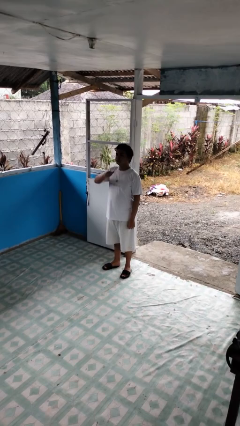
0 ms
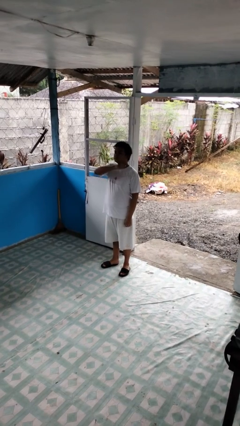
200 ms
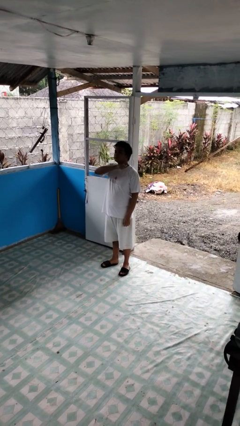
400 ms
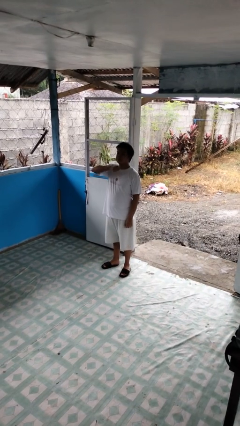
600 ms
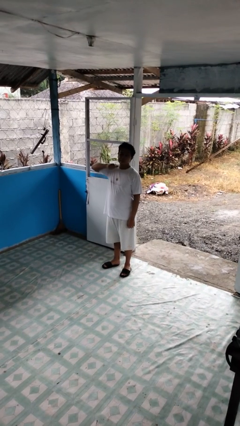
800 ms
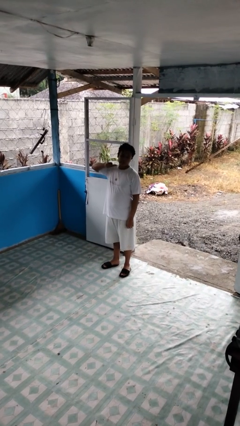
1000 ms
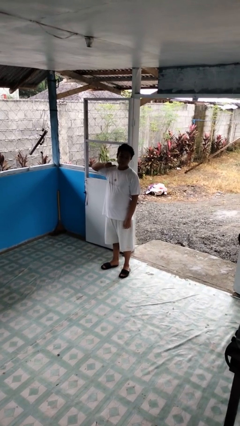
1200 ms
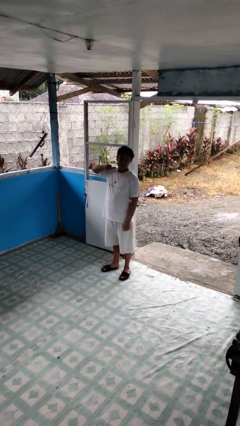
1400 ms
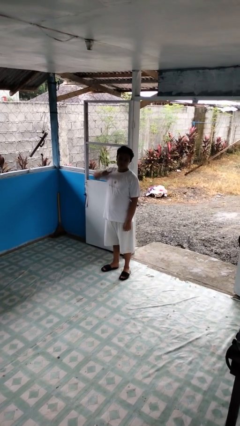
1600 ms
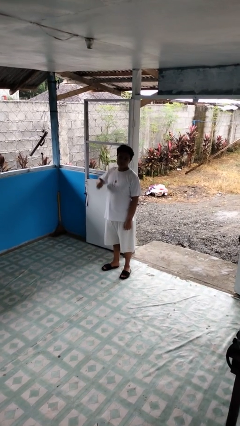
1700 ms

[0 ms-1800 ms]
person gestures cut

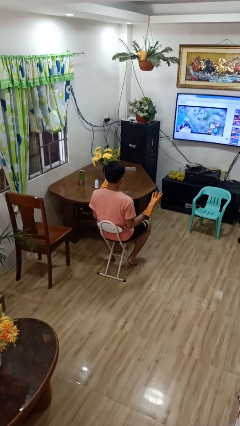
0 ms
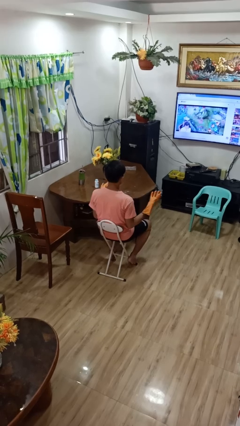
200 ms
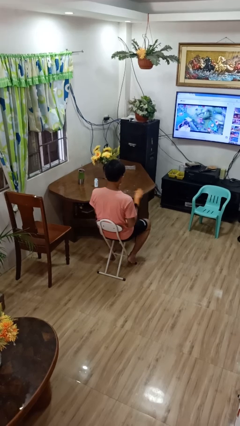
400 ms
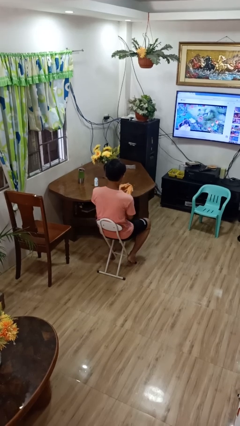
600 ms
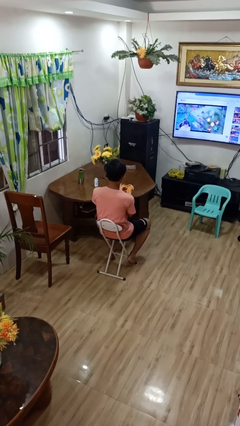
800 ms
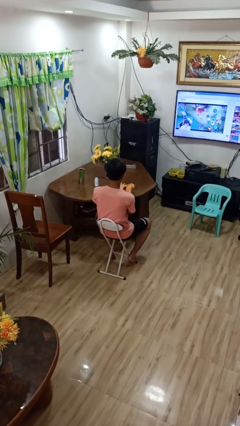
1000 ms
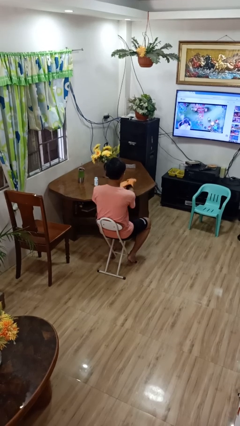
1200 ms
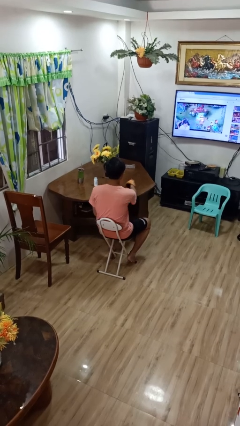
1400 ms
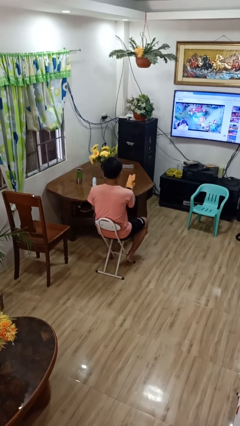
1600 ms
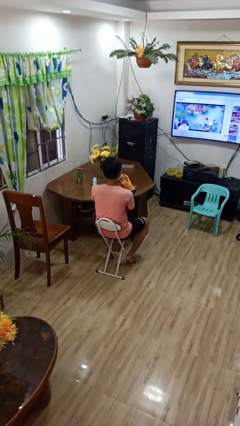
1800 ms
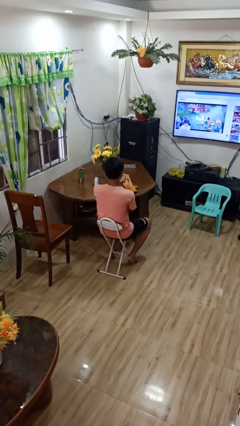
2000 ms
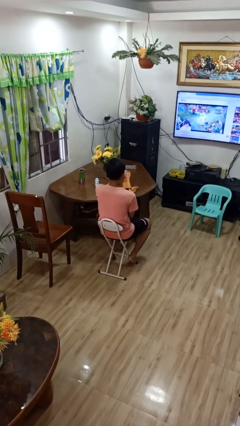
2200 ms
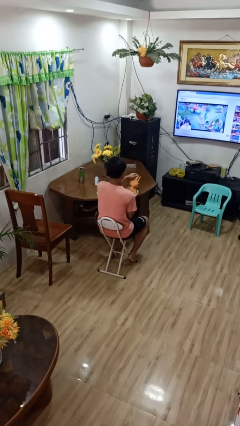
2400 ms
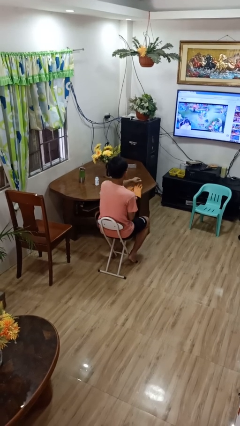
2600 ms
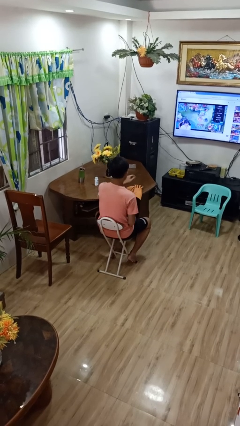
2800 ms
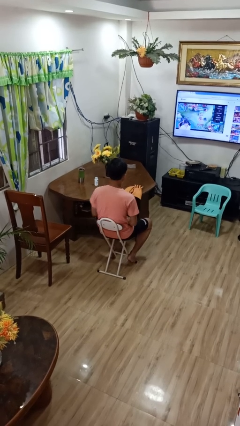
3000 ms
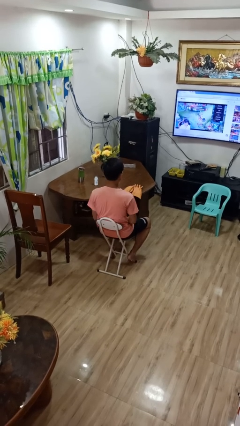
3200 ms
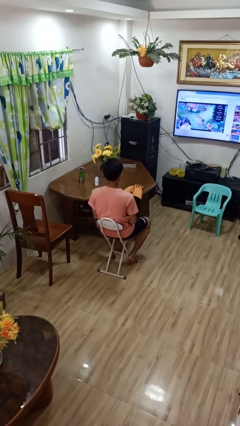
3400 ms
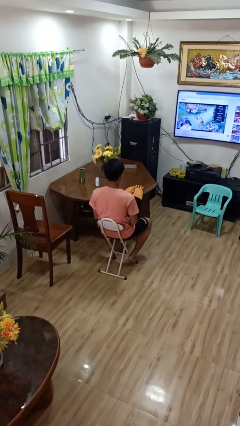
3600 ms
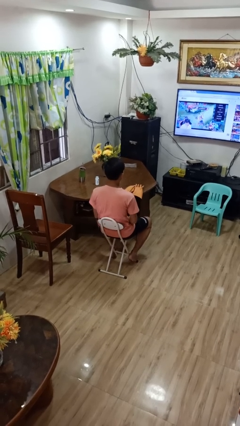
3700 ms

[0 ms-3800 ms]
person takes off gloves

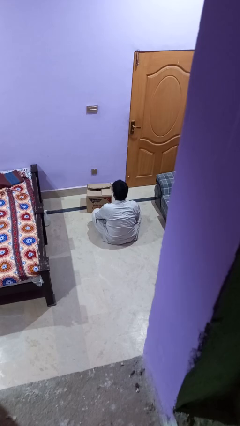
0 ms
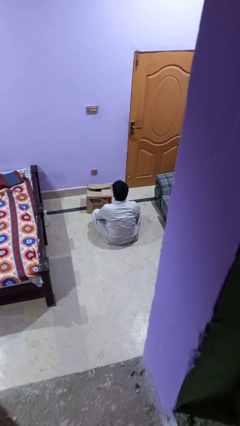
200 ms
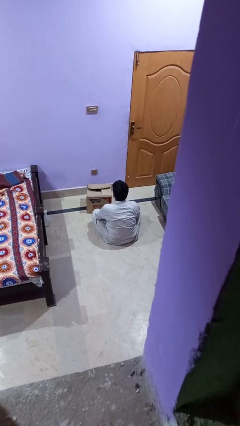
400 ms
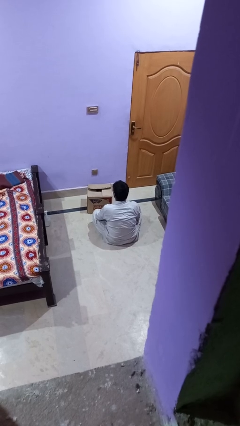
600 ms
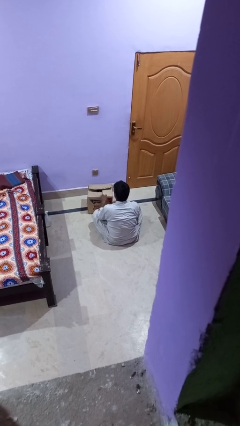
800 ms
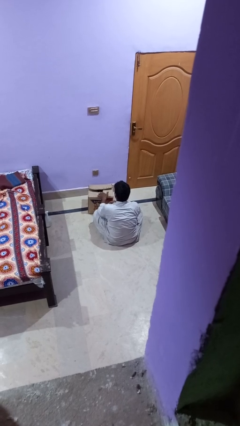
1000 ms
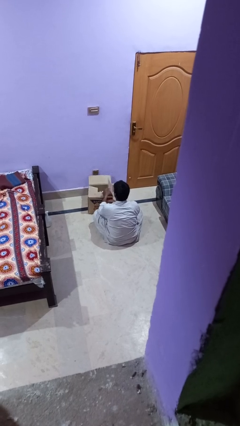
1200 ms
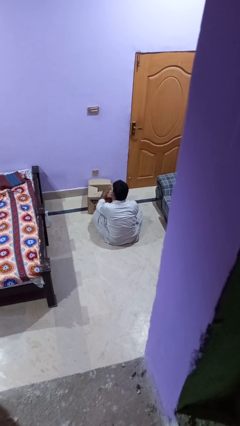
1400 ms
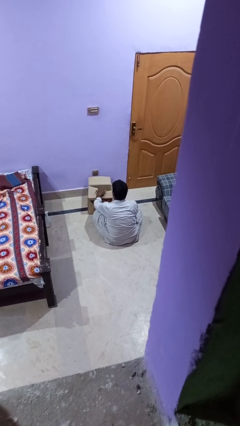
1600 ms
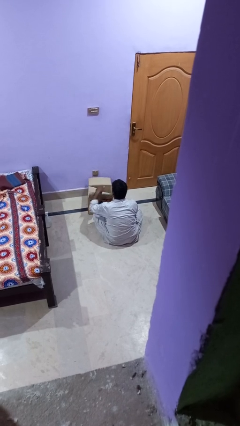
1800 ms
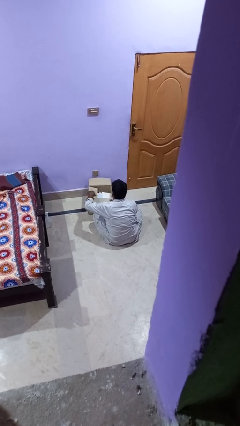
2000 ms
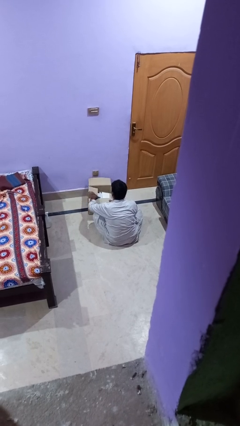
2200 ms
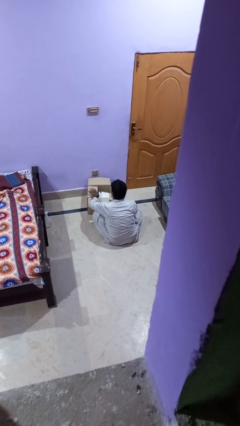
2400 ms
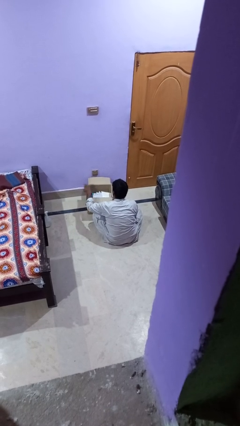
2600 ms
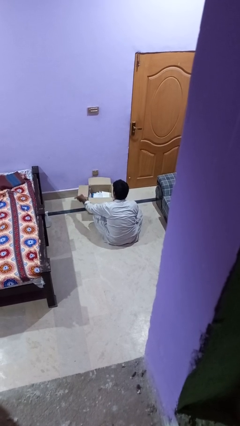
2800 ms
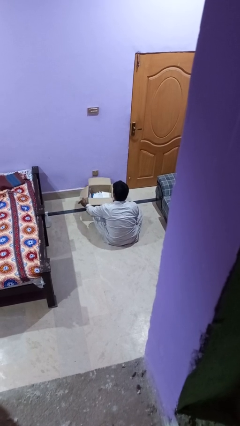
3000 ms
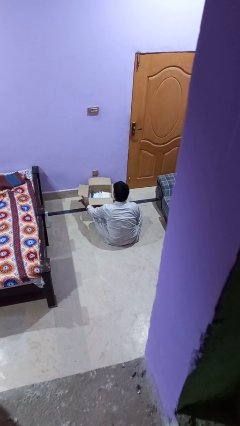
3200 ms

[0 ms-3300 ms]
person opens box

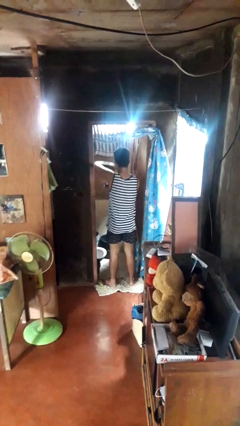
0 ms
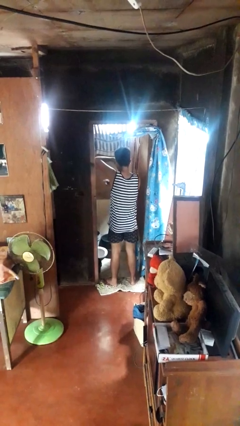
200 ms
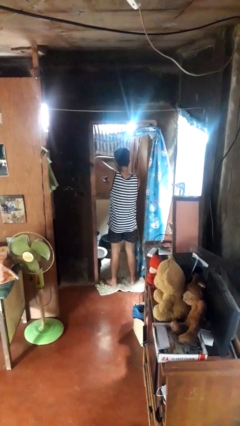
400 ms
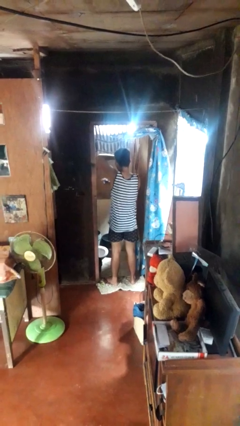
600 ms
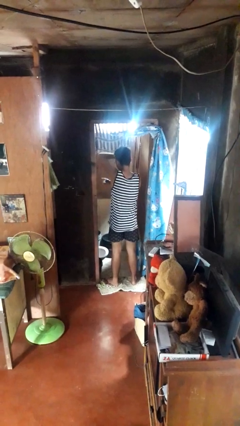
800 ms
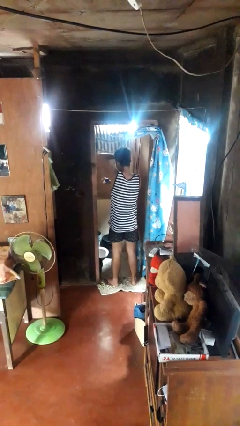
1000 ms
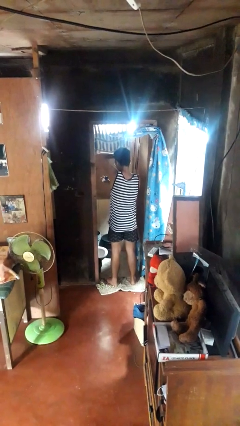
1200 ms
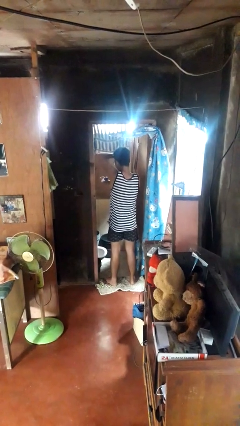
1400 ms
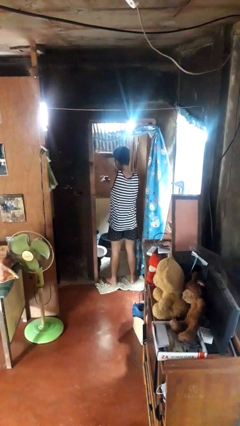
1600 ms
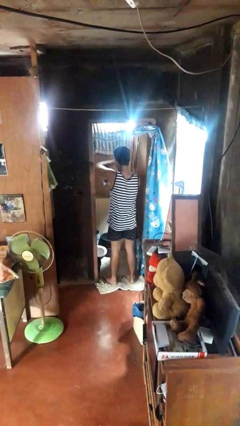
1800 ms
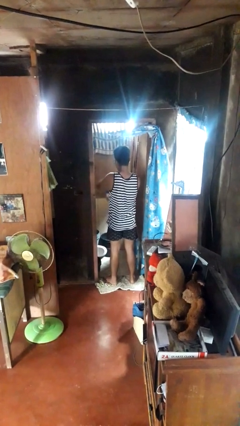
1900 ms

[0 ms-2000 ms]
person applies deodorant

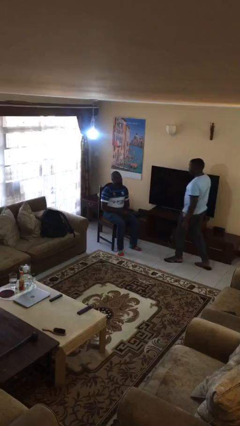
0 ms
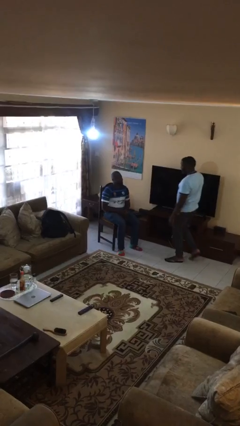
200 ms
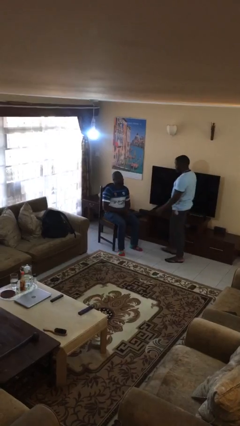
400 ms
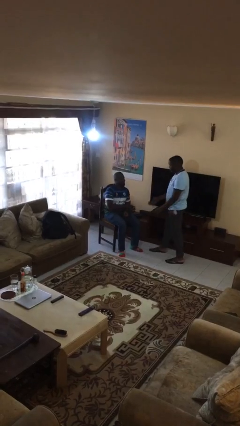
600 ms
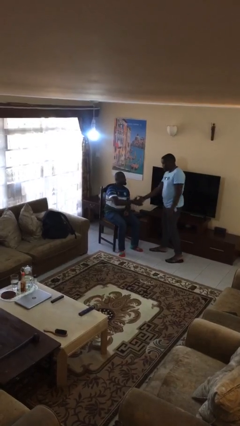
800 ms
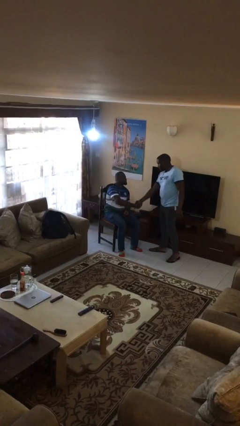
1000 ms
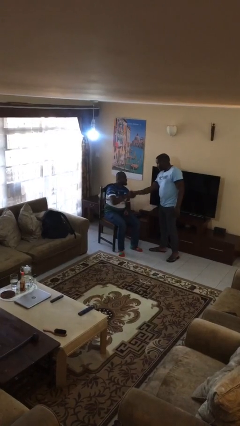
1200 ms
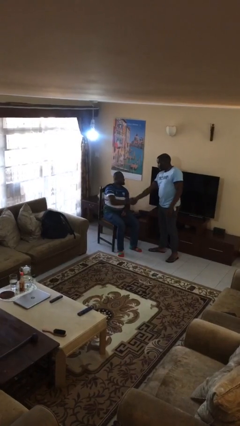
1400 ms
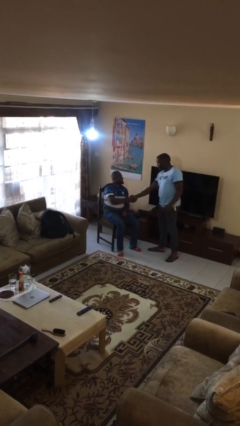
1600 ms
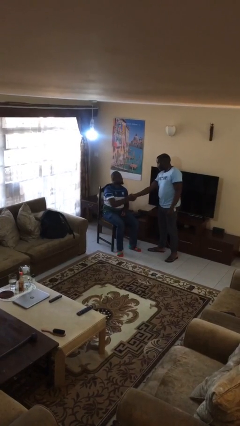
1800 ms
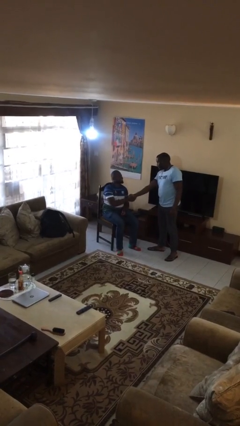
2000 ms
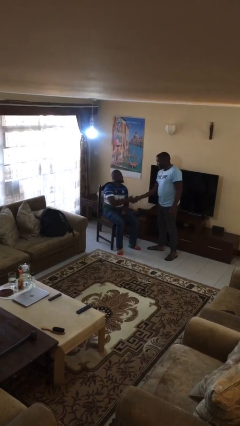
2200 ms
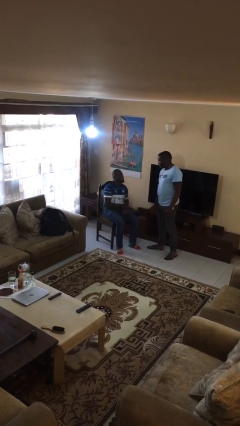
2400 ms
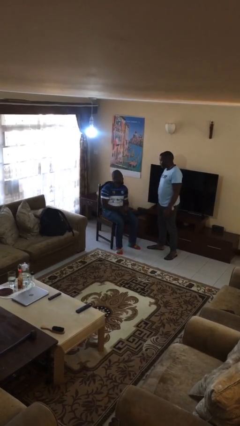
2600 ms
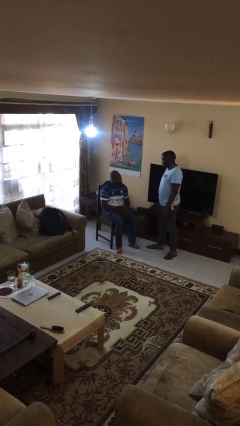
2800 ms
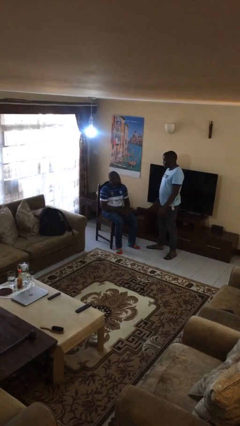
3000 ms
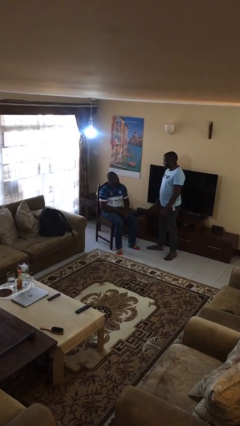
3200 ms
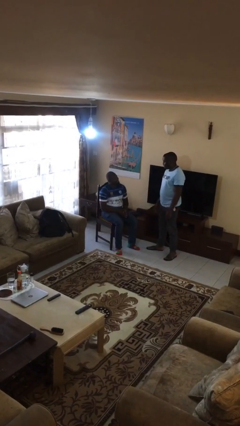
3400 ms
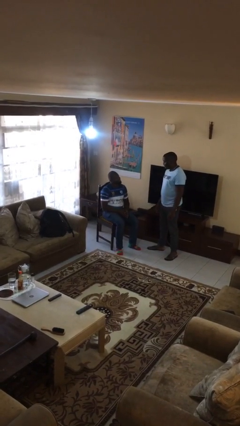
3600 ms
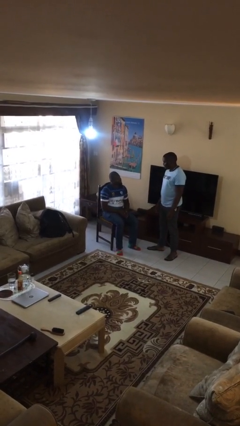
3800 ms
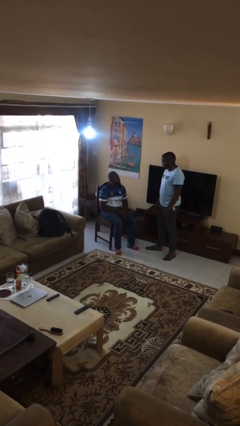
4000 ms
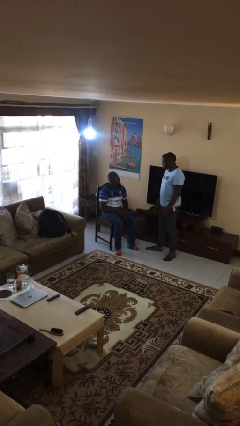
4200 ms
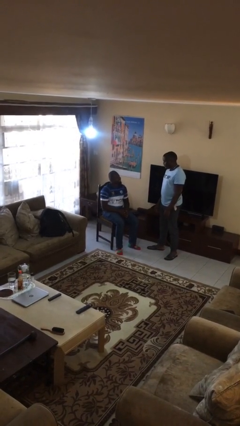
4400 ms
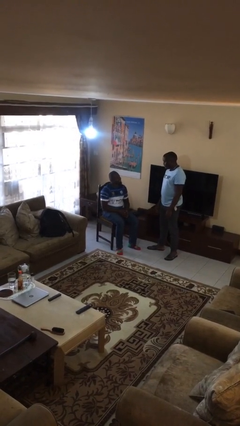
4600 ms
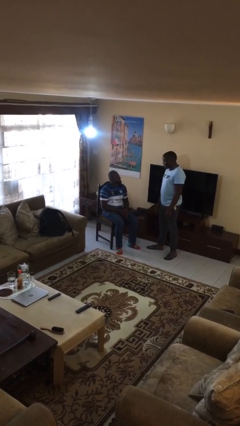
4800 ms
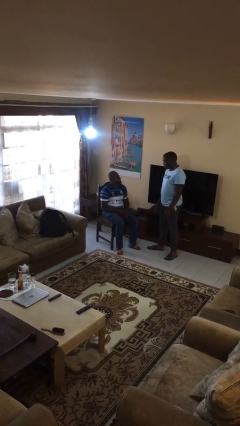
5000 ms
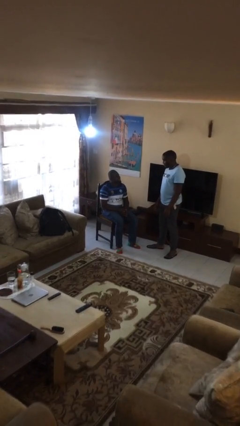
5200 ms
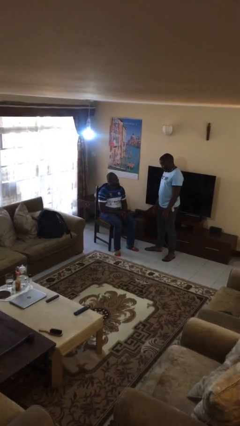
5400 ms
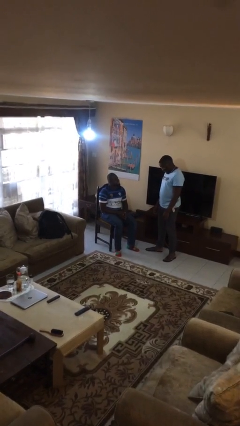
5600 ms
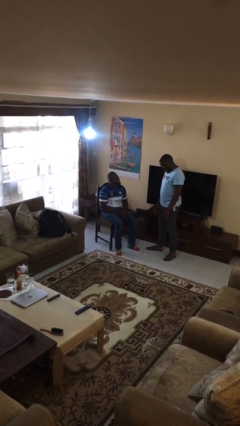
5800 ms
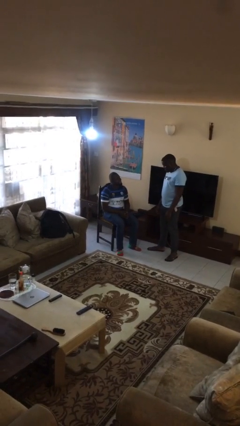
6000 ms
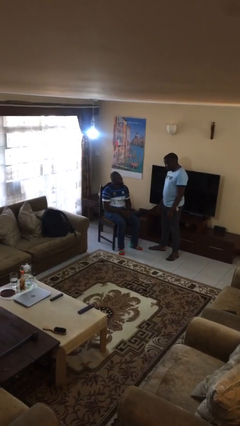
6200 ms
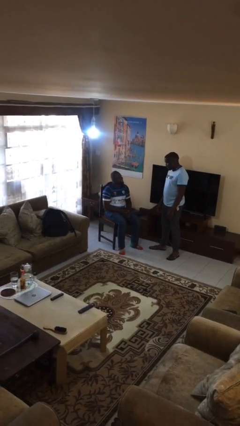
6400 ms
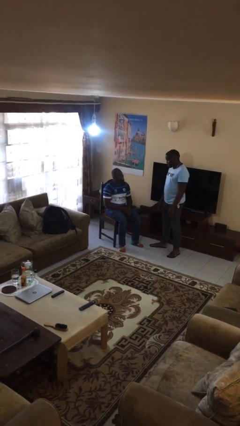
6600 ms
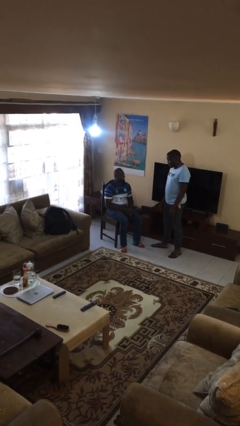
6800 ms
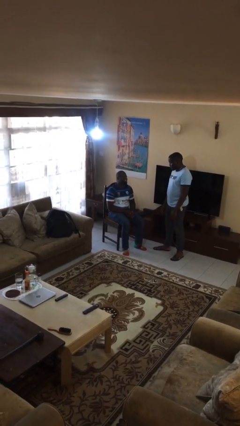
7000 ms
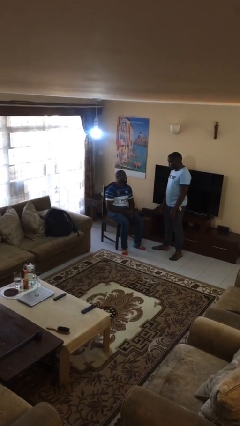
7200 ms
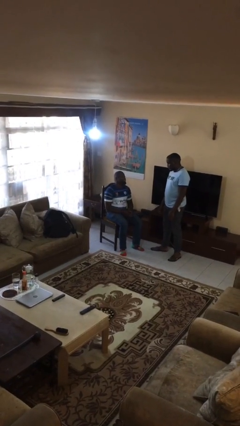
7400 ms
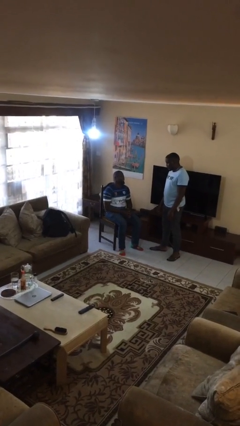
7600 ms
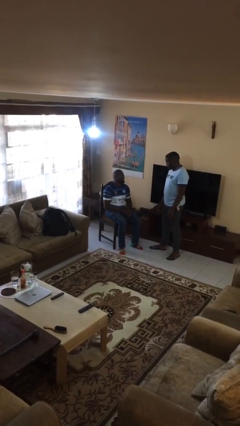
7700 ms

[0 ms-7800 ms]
person shakes hand
